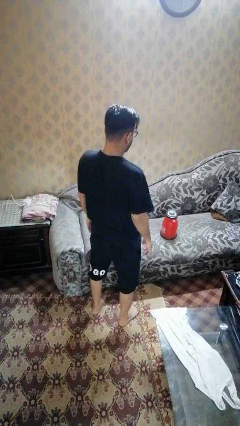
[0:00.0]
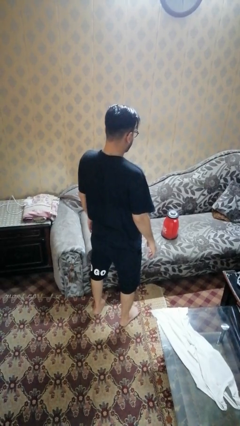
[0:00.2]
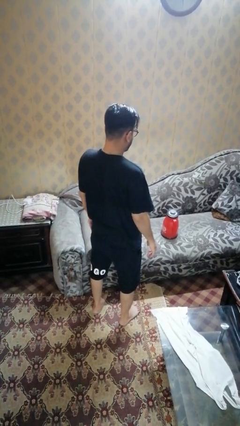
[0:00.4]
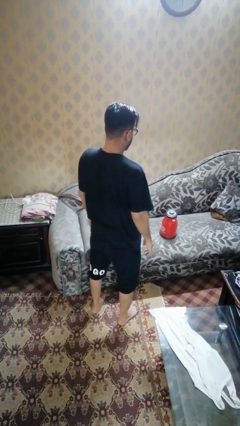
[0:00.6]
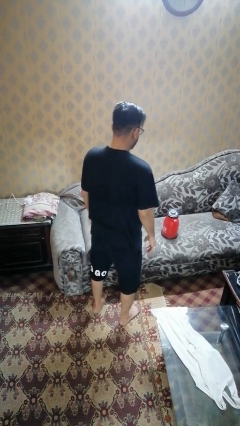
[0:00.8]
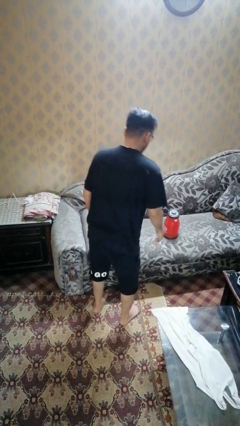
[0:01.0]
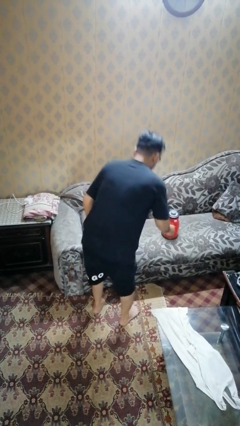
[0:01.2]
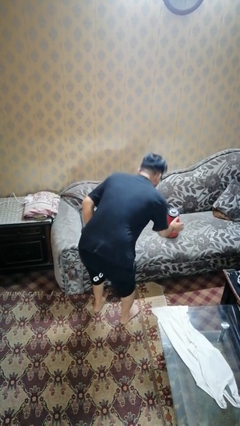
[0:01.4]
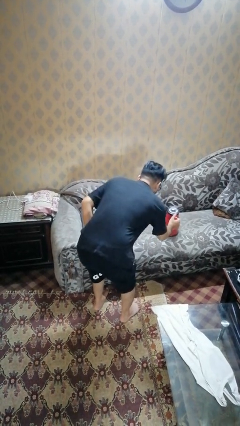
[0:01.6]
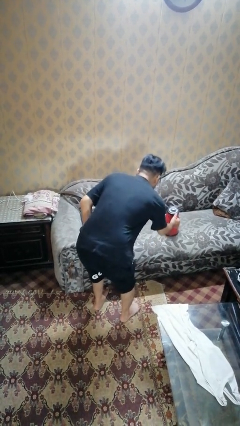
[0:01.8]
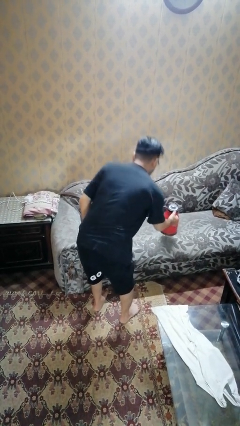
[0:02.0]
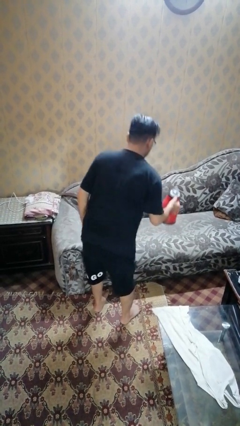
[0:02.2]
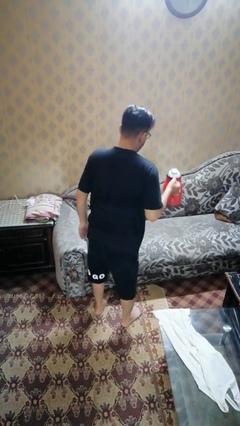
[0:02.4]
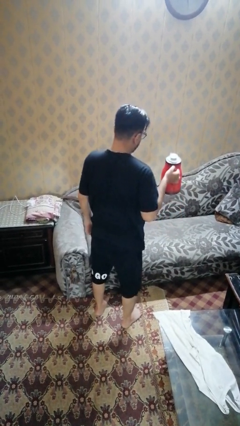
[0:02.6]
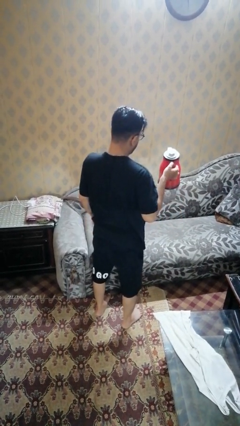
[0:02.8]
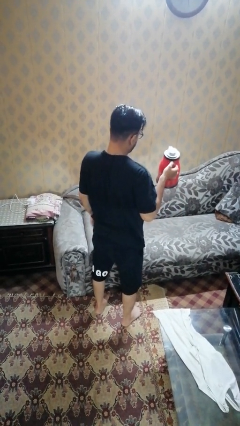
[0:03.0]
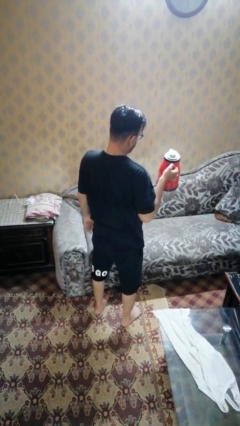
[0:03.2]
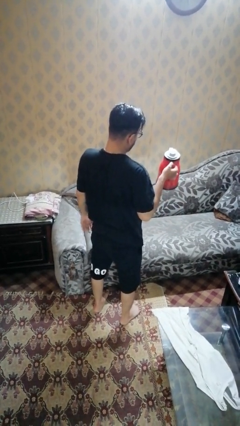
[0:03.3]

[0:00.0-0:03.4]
person picks up object from couch

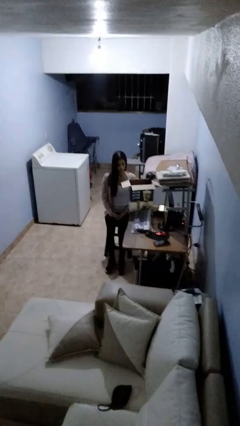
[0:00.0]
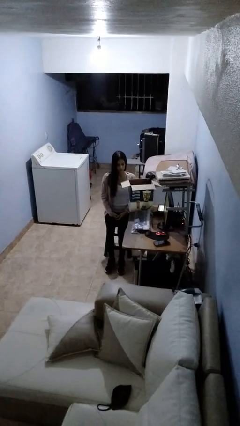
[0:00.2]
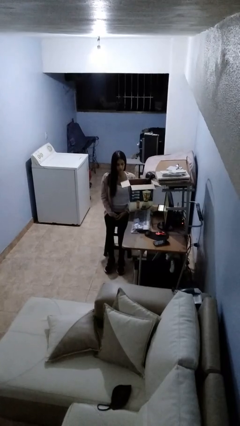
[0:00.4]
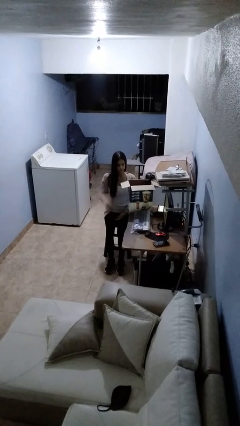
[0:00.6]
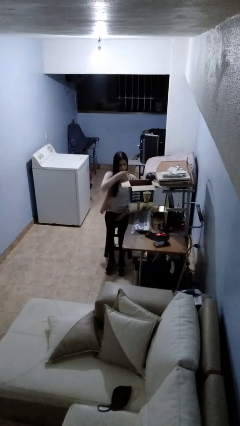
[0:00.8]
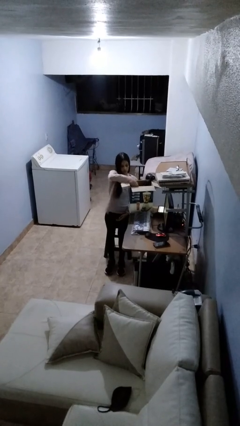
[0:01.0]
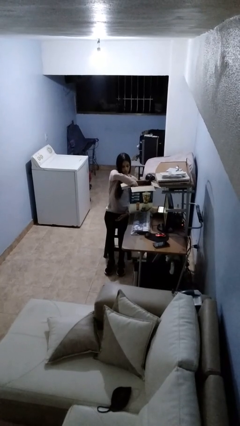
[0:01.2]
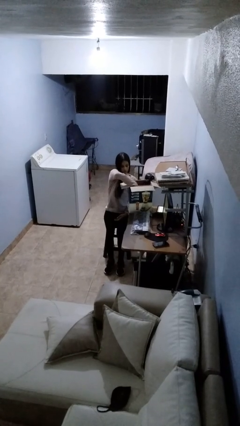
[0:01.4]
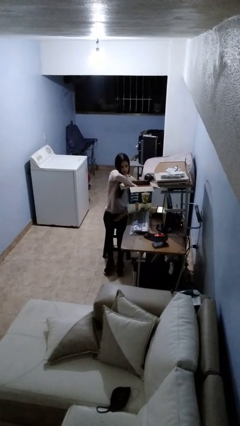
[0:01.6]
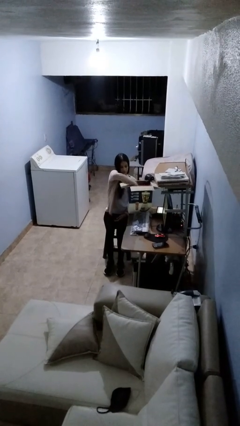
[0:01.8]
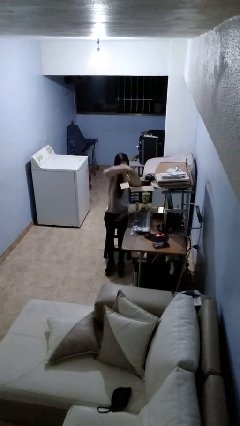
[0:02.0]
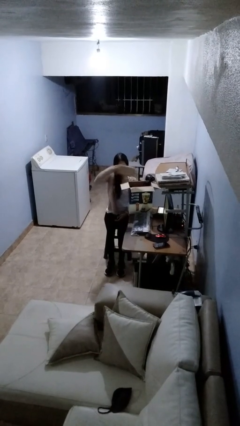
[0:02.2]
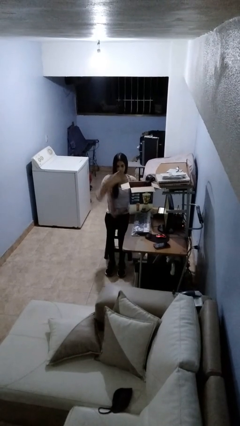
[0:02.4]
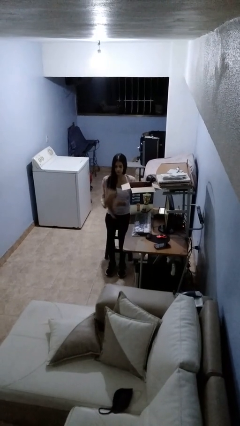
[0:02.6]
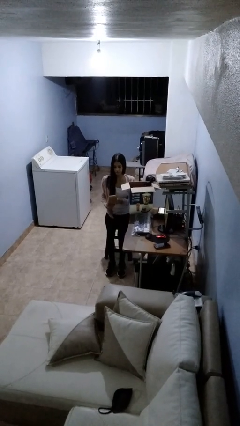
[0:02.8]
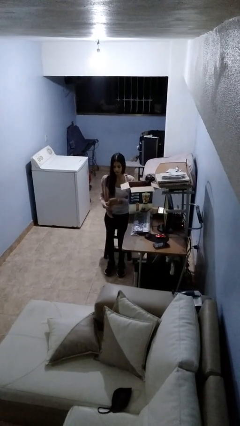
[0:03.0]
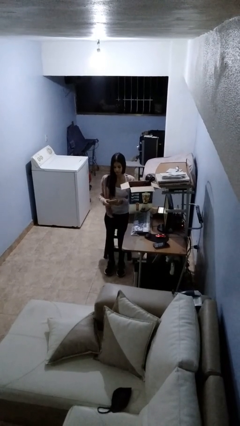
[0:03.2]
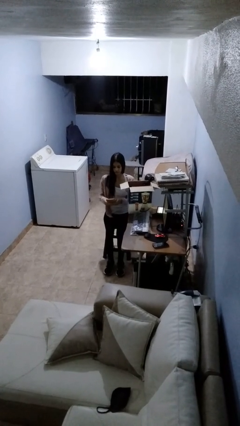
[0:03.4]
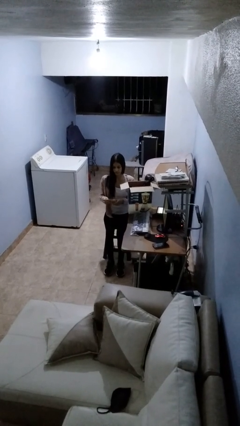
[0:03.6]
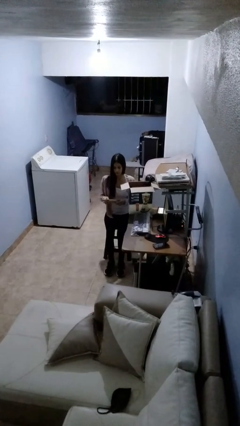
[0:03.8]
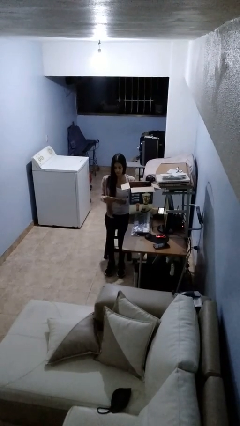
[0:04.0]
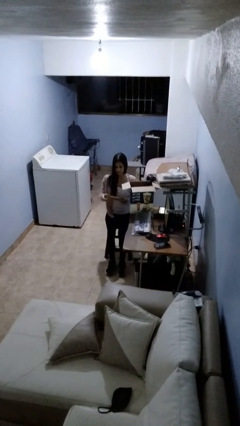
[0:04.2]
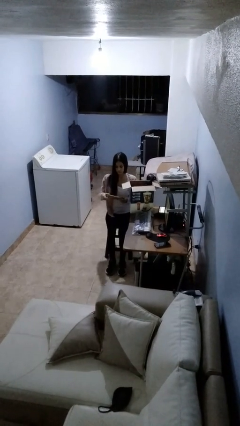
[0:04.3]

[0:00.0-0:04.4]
person takes object from box

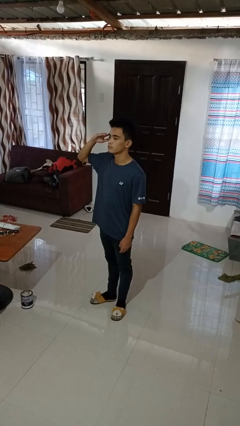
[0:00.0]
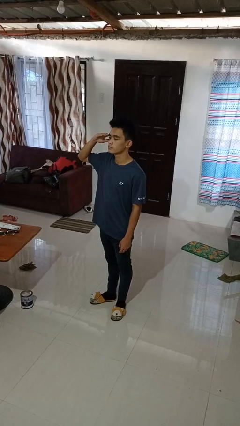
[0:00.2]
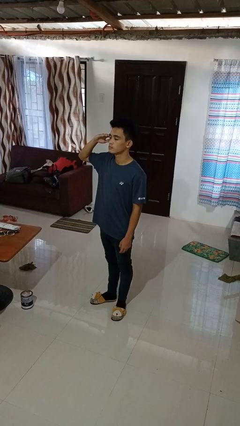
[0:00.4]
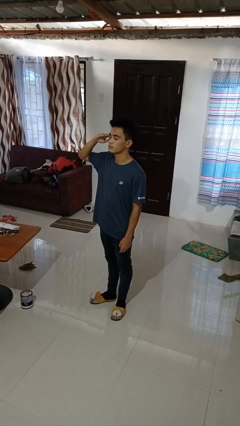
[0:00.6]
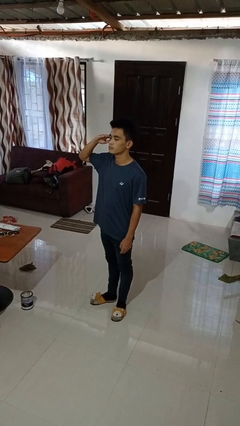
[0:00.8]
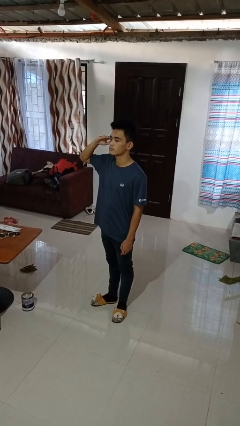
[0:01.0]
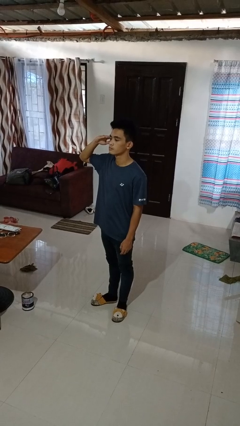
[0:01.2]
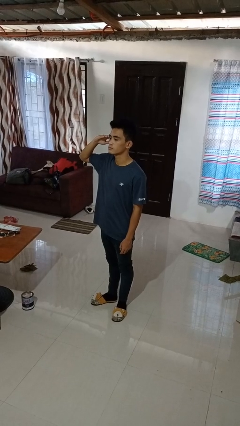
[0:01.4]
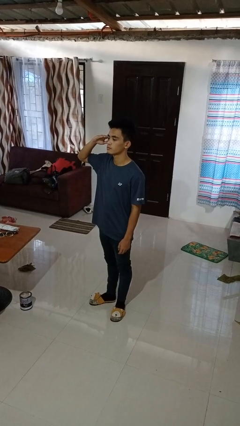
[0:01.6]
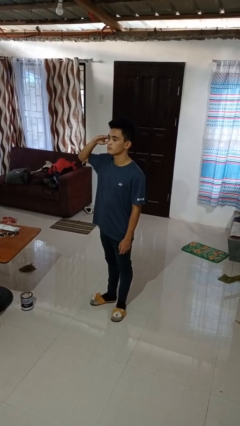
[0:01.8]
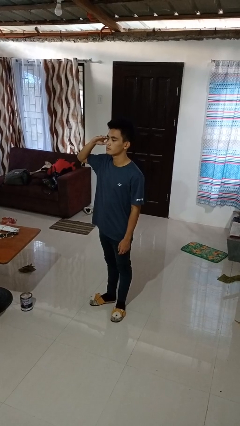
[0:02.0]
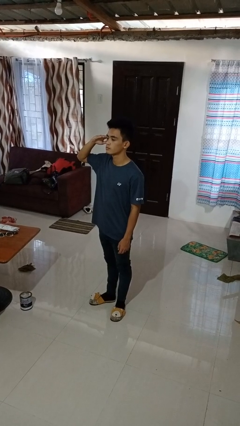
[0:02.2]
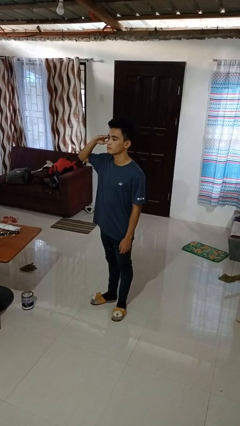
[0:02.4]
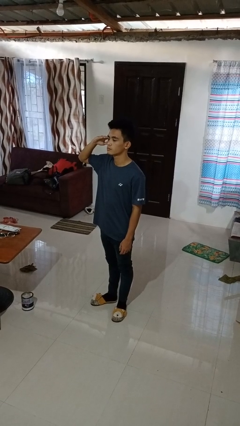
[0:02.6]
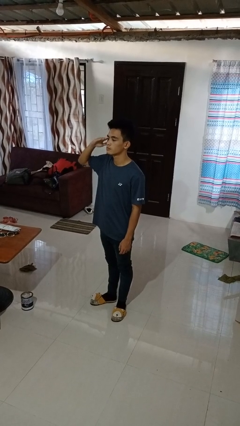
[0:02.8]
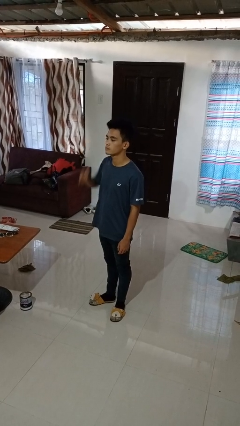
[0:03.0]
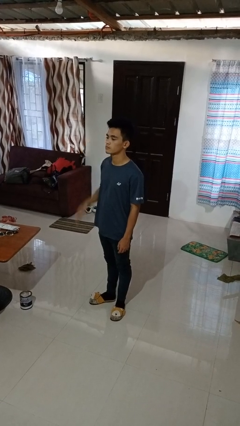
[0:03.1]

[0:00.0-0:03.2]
person salutes

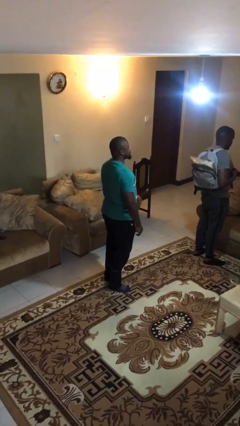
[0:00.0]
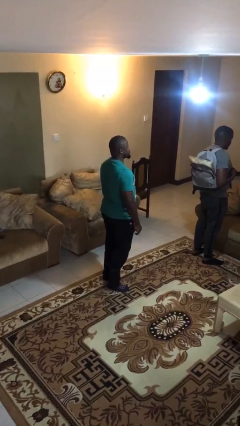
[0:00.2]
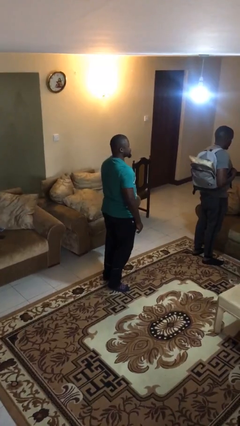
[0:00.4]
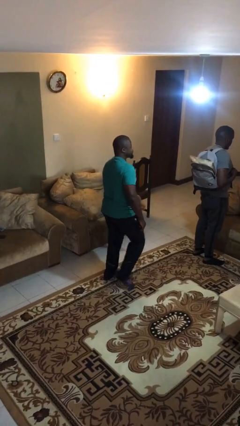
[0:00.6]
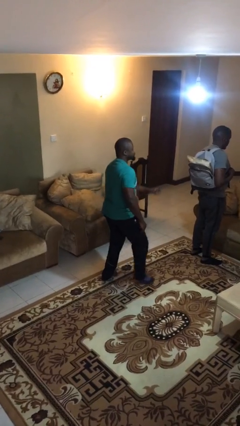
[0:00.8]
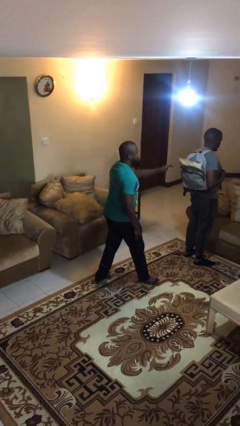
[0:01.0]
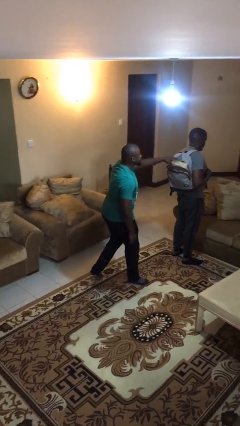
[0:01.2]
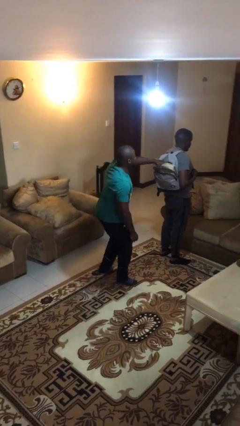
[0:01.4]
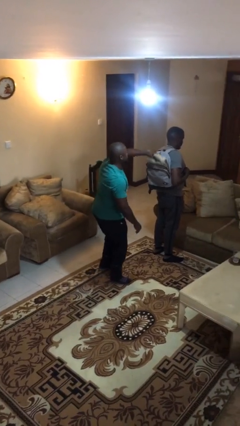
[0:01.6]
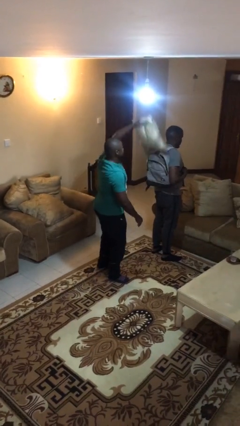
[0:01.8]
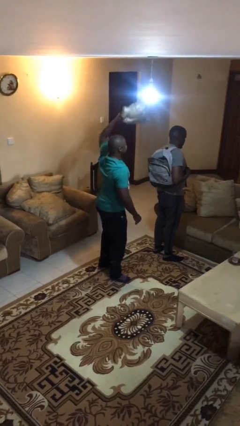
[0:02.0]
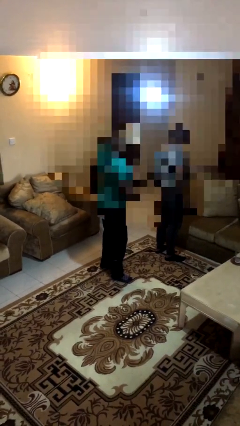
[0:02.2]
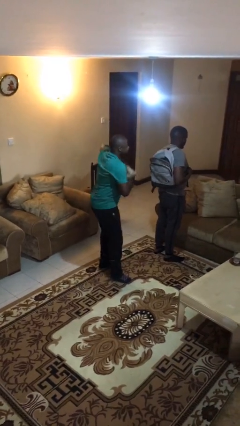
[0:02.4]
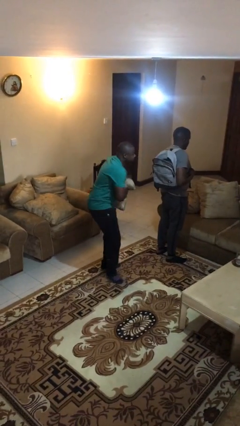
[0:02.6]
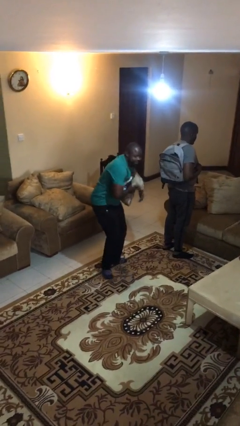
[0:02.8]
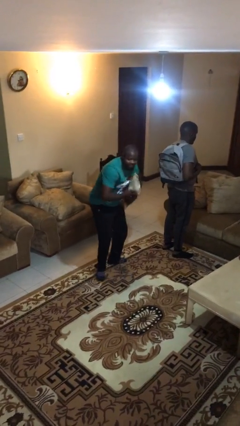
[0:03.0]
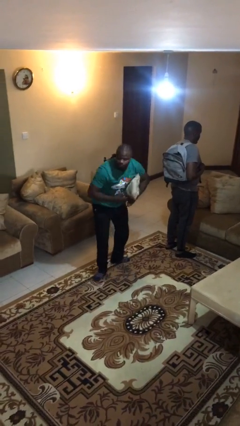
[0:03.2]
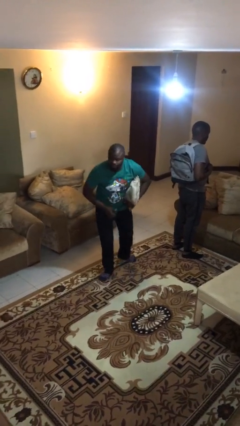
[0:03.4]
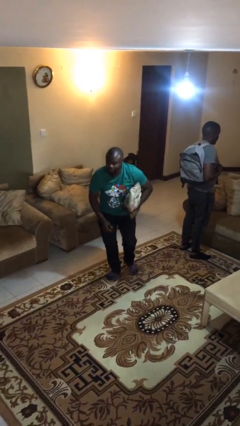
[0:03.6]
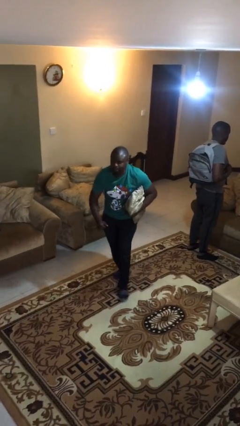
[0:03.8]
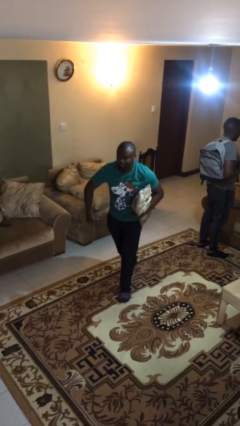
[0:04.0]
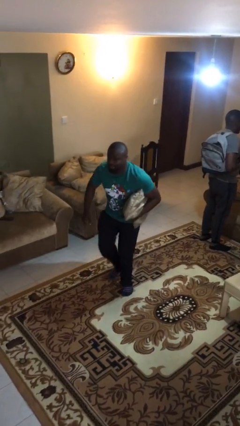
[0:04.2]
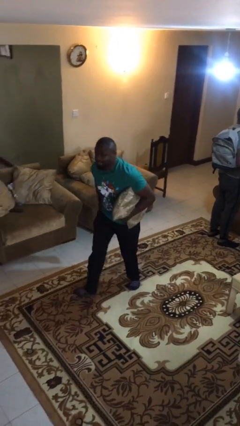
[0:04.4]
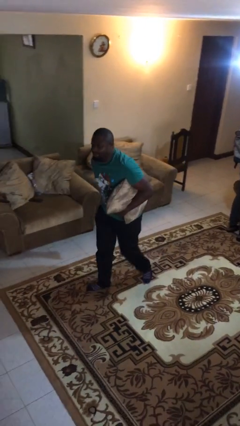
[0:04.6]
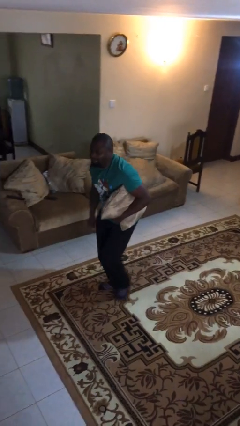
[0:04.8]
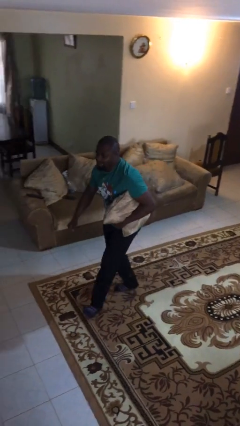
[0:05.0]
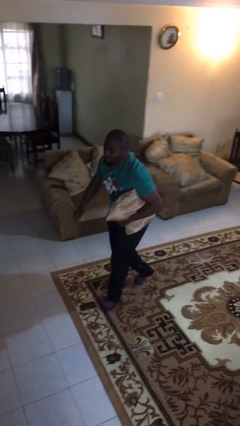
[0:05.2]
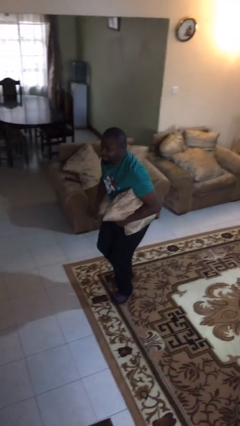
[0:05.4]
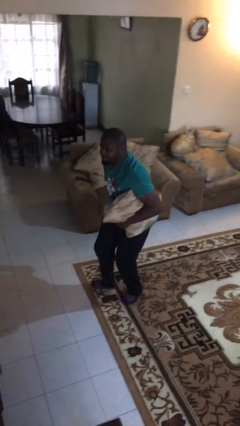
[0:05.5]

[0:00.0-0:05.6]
person steals object from person

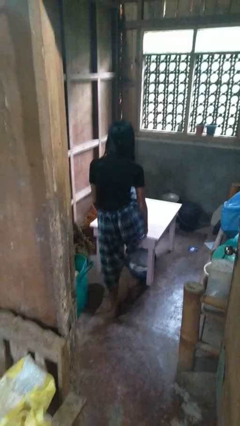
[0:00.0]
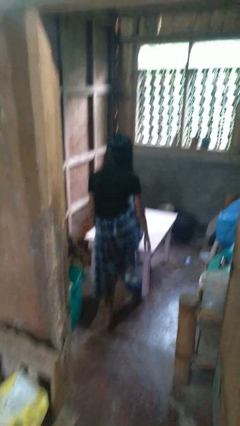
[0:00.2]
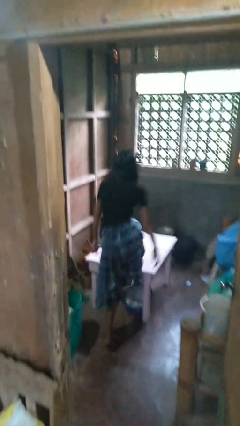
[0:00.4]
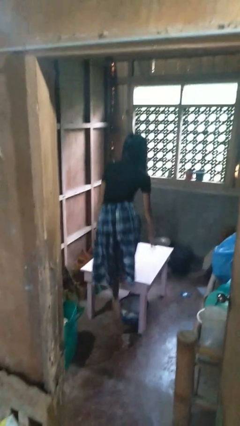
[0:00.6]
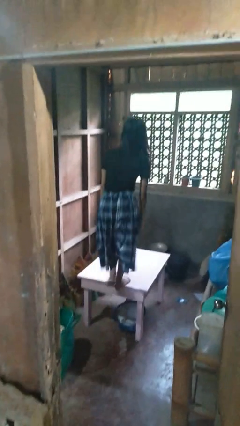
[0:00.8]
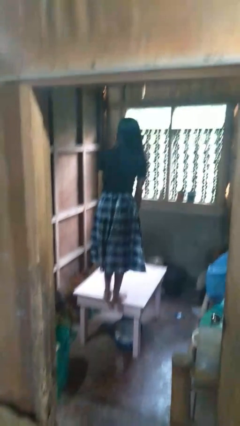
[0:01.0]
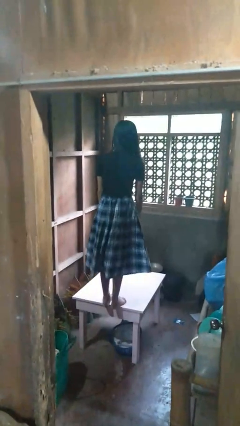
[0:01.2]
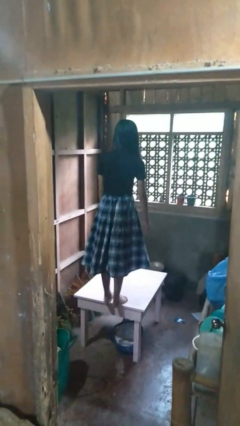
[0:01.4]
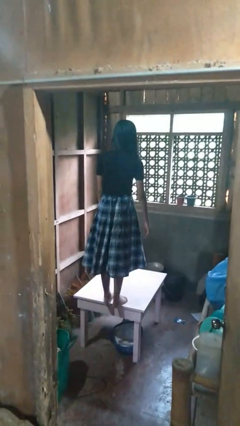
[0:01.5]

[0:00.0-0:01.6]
person climbs on table
